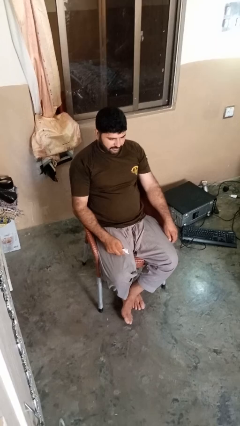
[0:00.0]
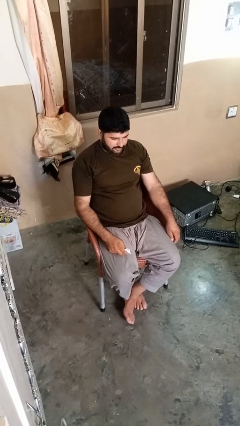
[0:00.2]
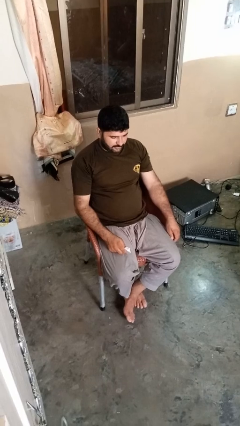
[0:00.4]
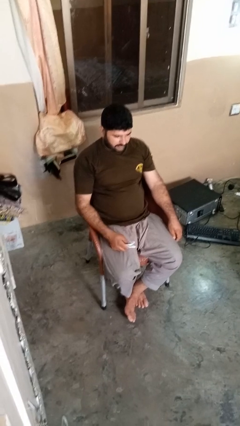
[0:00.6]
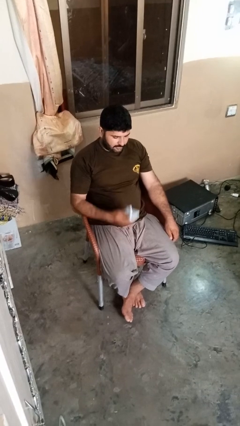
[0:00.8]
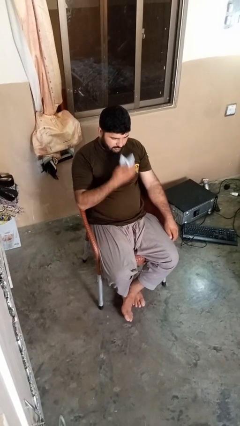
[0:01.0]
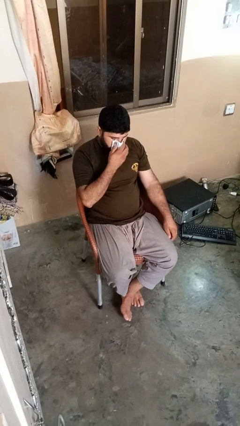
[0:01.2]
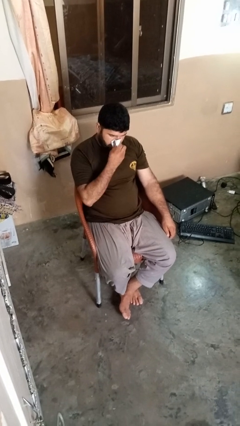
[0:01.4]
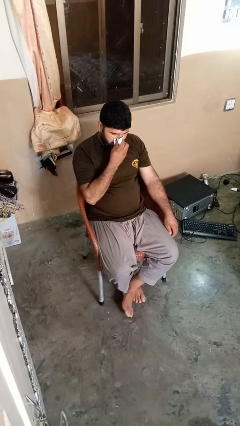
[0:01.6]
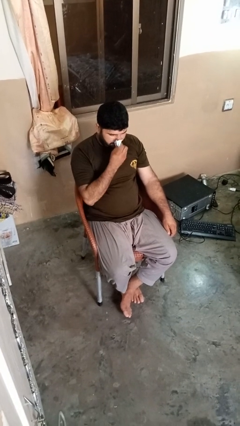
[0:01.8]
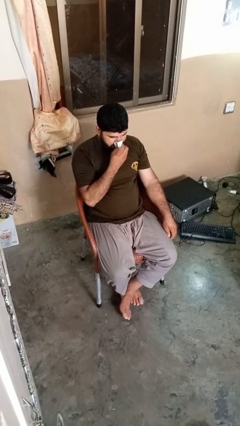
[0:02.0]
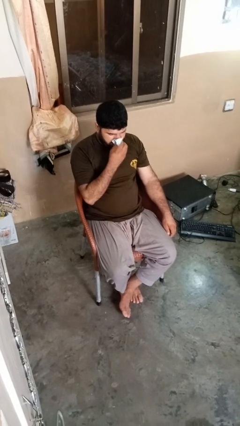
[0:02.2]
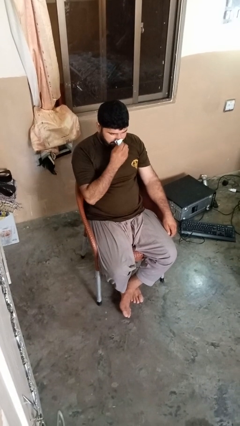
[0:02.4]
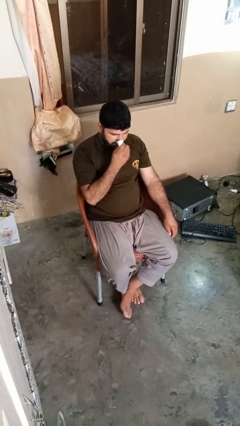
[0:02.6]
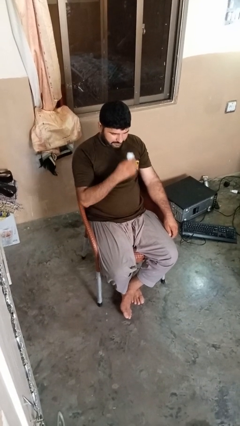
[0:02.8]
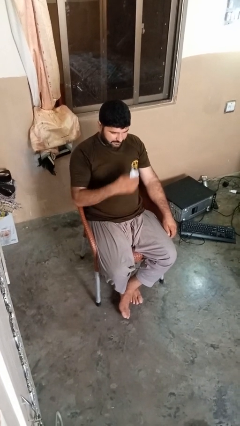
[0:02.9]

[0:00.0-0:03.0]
person blows nose

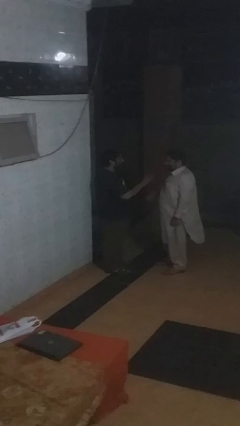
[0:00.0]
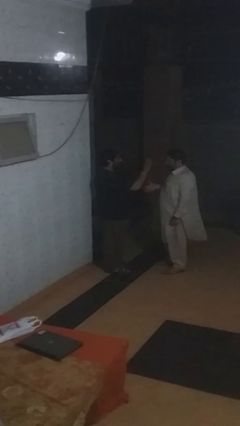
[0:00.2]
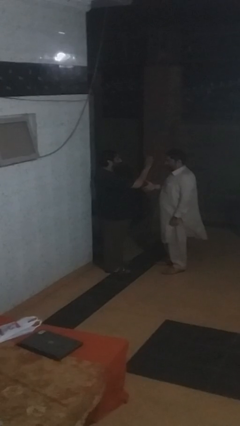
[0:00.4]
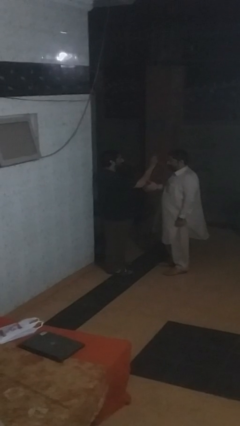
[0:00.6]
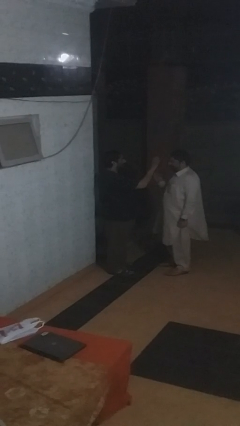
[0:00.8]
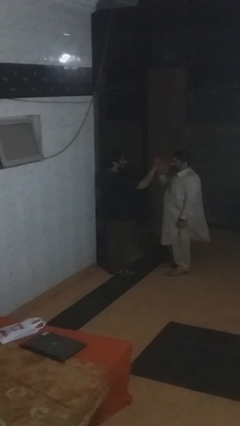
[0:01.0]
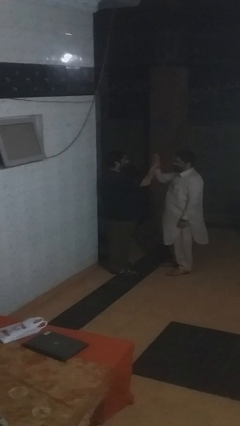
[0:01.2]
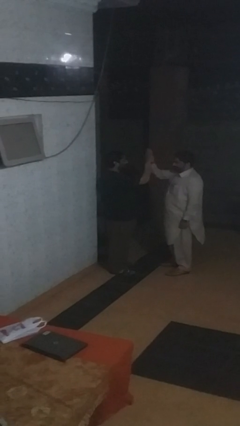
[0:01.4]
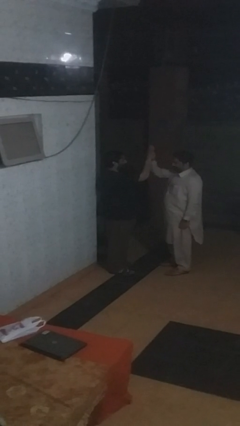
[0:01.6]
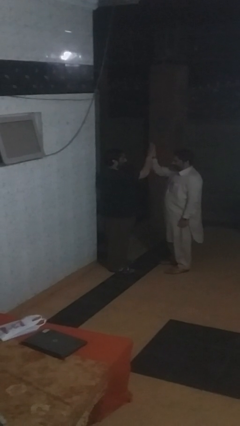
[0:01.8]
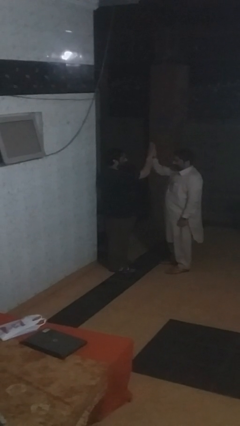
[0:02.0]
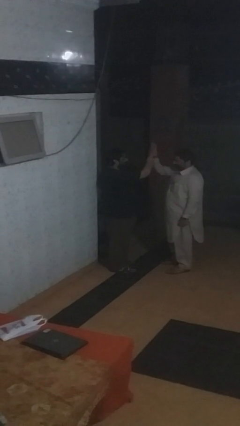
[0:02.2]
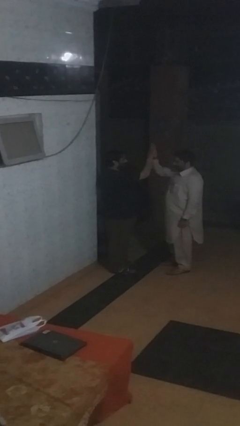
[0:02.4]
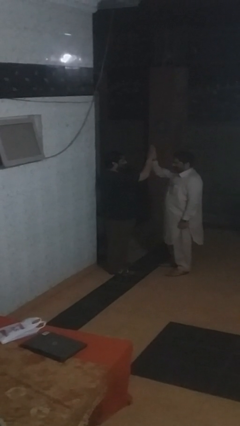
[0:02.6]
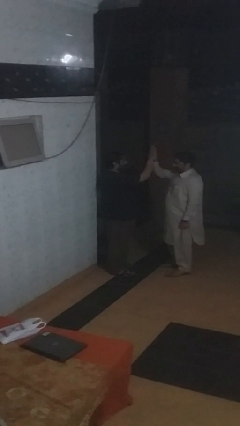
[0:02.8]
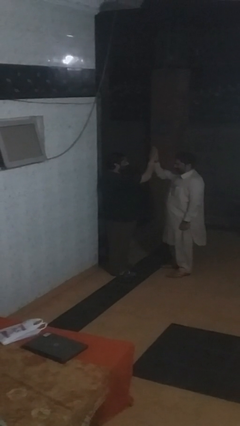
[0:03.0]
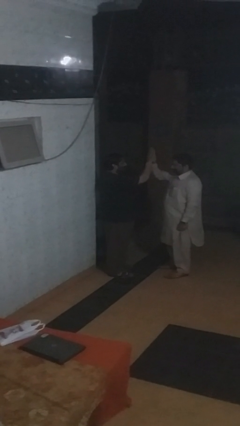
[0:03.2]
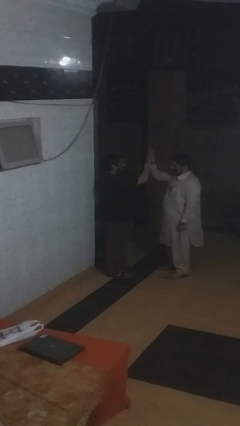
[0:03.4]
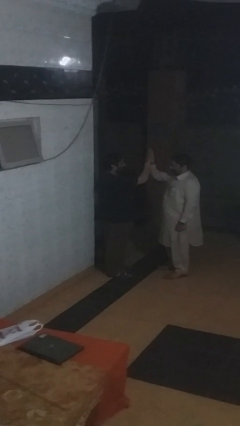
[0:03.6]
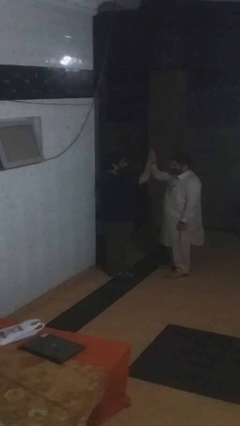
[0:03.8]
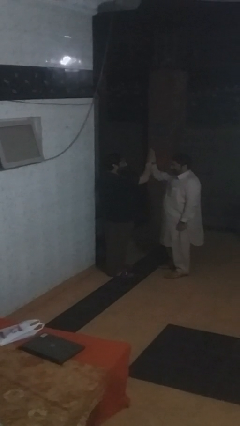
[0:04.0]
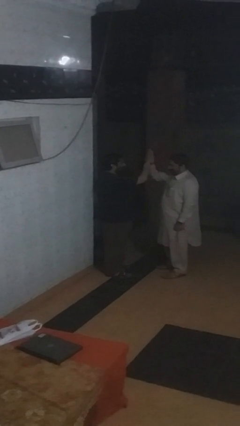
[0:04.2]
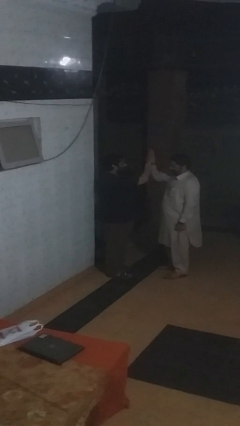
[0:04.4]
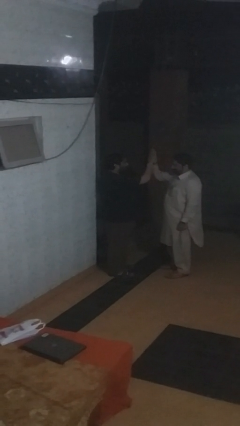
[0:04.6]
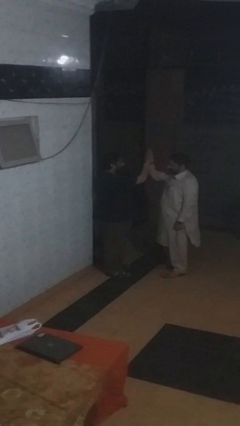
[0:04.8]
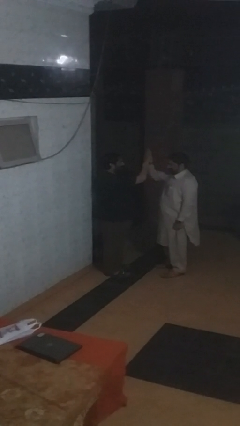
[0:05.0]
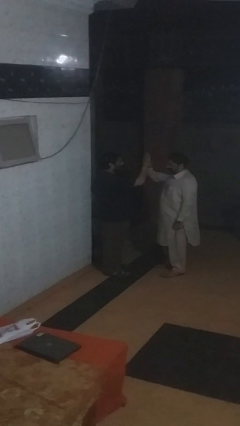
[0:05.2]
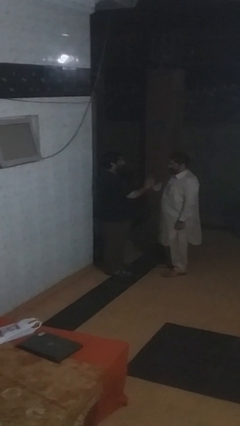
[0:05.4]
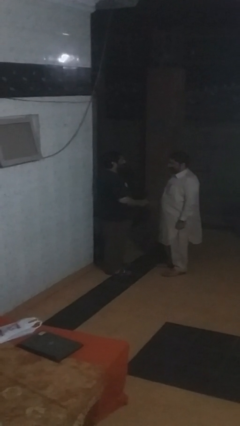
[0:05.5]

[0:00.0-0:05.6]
person highfives hand

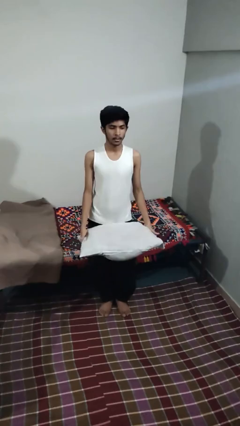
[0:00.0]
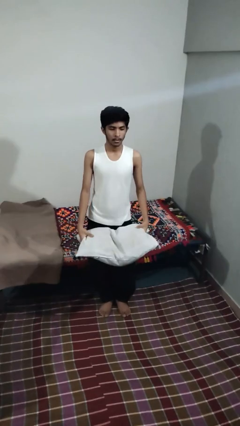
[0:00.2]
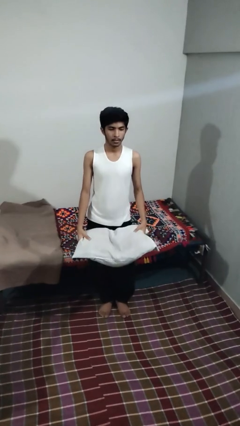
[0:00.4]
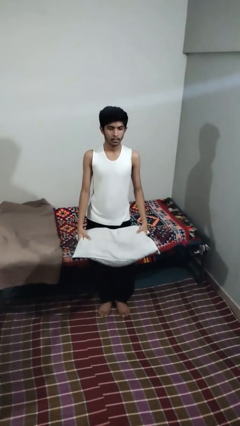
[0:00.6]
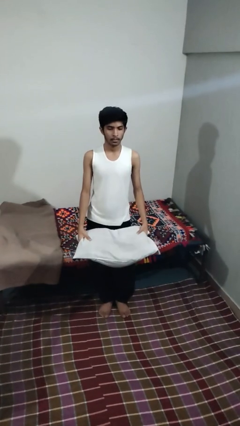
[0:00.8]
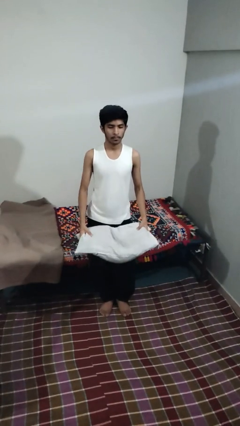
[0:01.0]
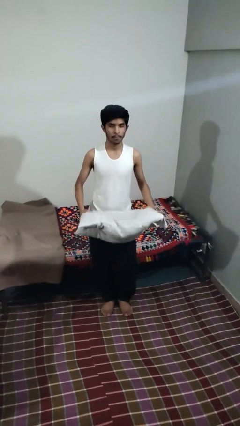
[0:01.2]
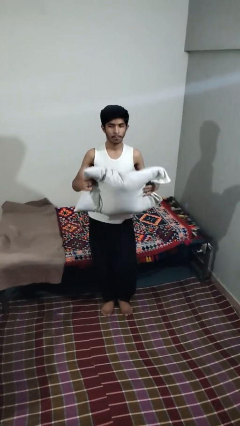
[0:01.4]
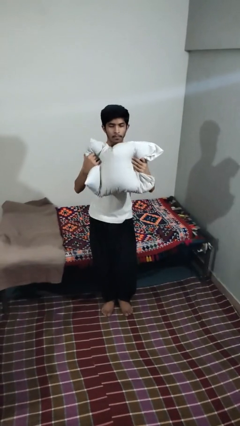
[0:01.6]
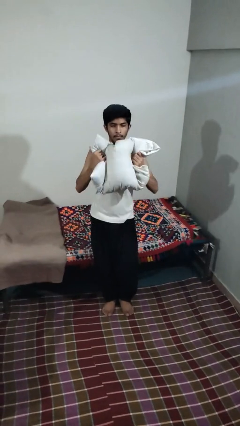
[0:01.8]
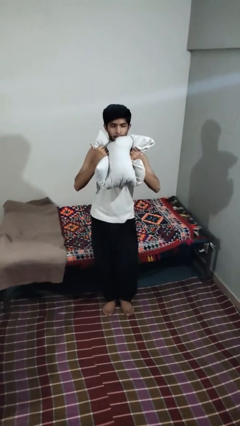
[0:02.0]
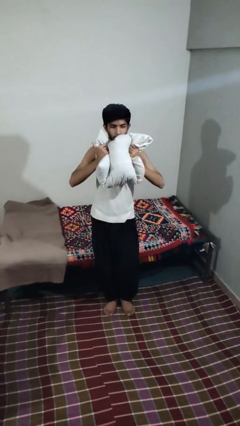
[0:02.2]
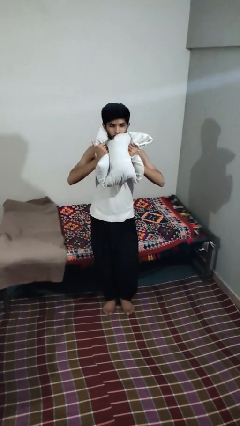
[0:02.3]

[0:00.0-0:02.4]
person squeezes object

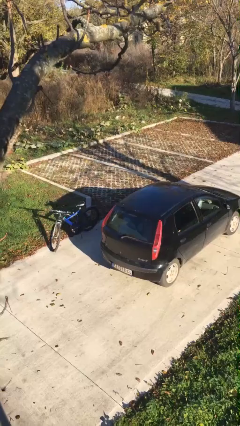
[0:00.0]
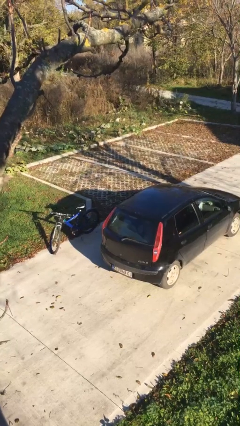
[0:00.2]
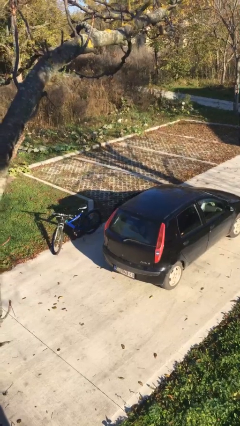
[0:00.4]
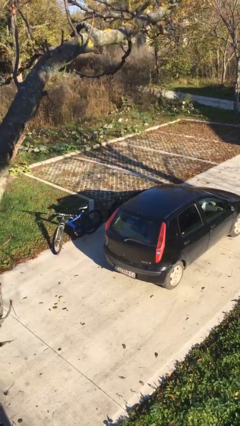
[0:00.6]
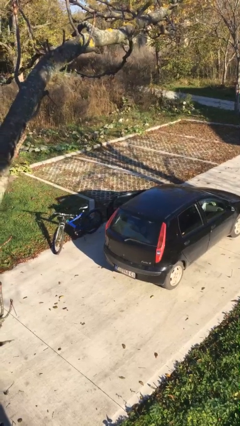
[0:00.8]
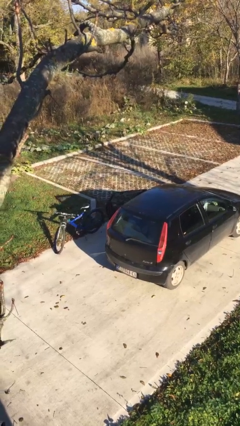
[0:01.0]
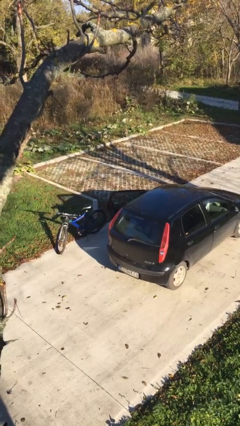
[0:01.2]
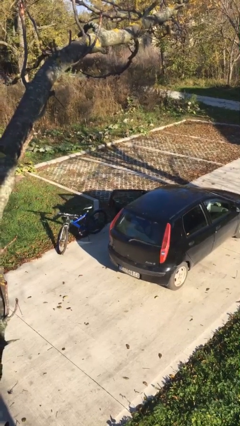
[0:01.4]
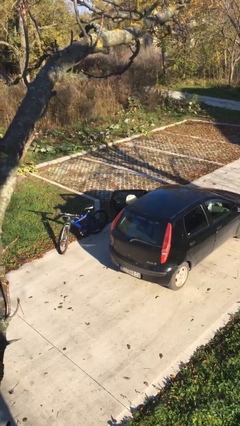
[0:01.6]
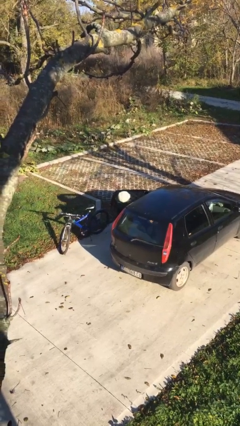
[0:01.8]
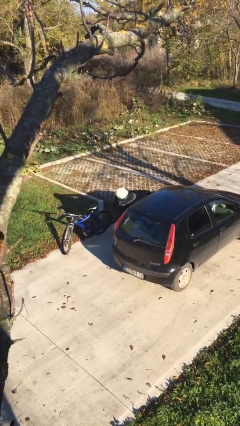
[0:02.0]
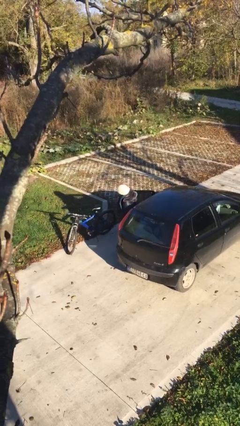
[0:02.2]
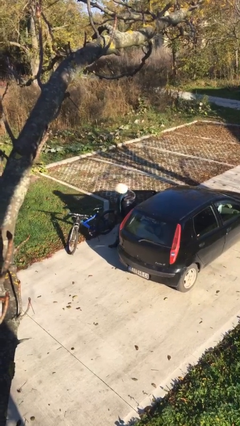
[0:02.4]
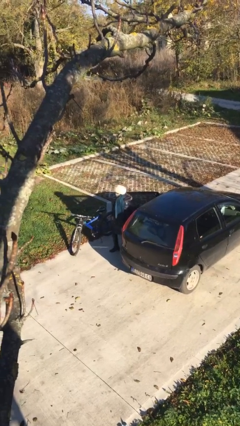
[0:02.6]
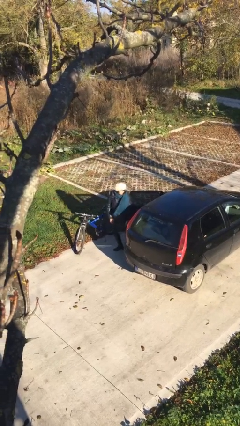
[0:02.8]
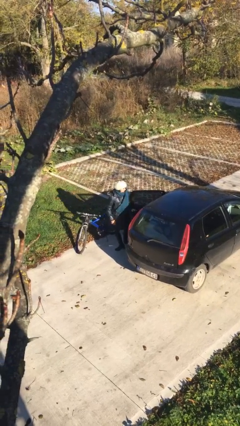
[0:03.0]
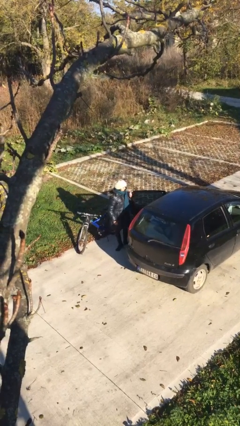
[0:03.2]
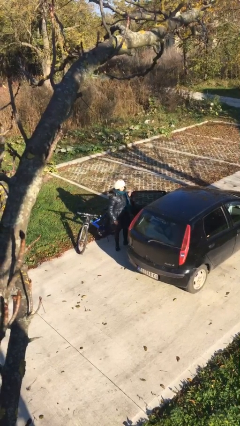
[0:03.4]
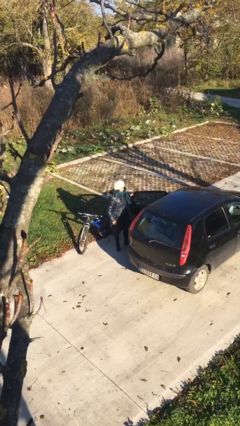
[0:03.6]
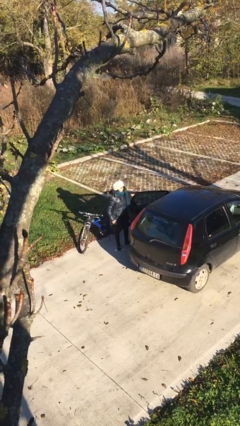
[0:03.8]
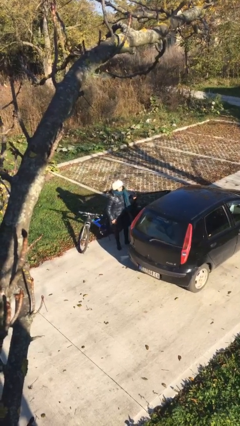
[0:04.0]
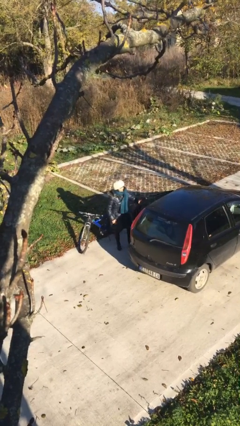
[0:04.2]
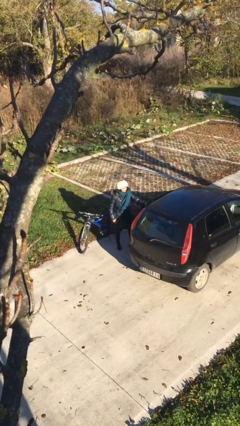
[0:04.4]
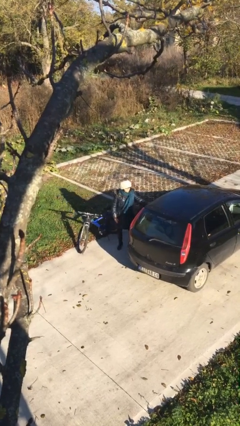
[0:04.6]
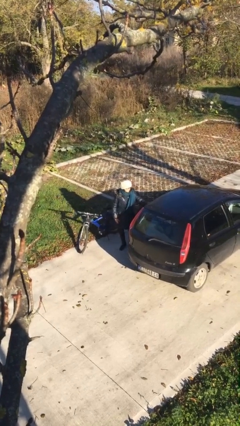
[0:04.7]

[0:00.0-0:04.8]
person exits car

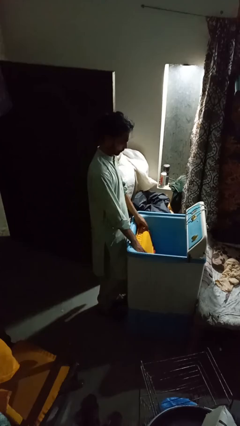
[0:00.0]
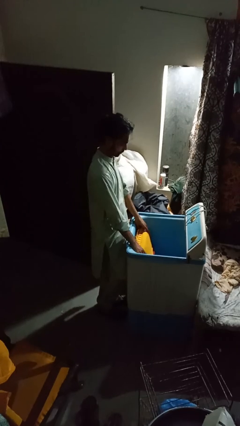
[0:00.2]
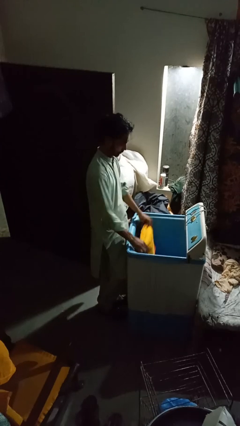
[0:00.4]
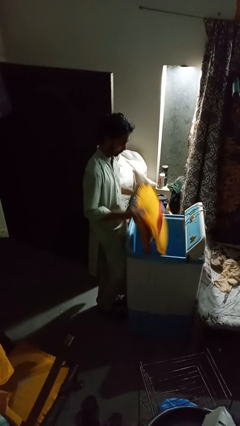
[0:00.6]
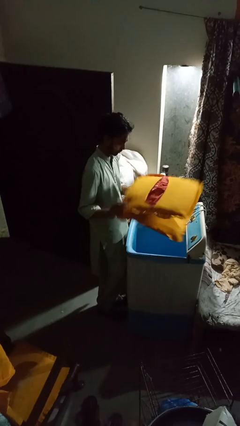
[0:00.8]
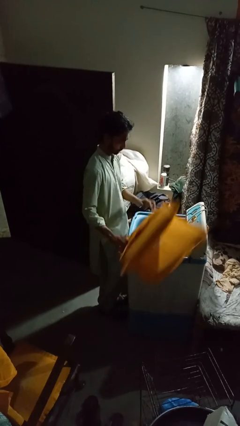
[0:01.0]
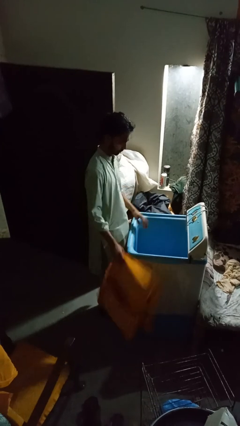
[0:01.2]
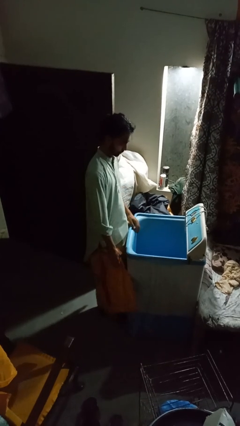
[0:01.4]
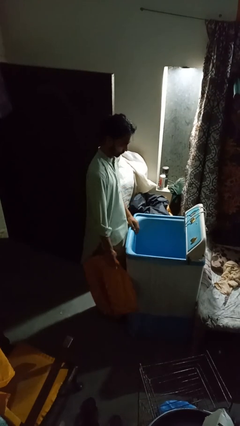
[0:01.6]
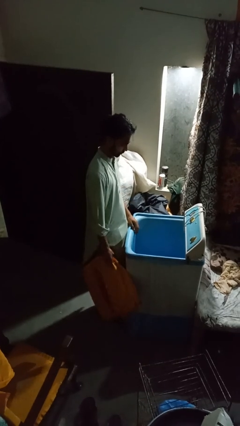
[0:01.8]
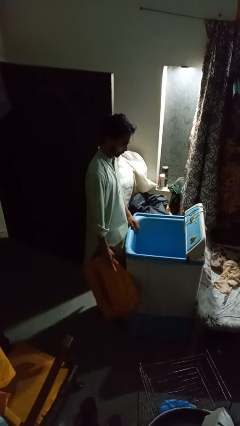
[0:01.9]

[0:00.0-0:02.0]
person unloads clotheswasher
